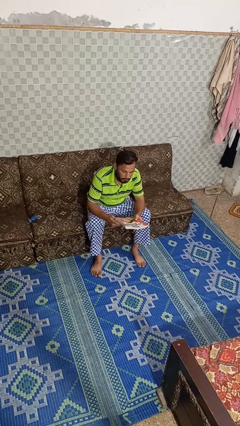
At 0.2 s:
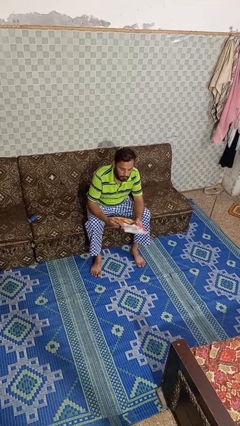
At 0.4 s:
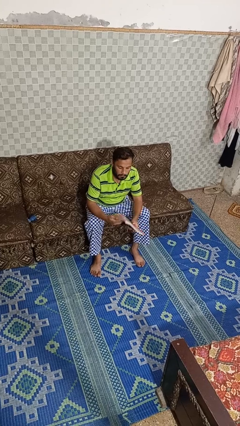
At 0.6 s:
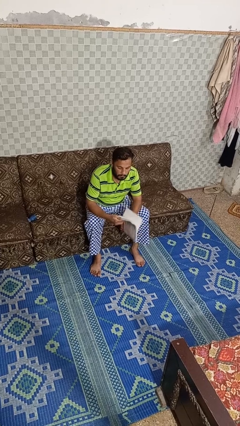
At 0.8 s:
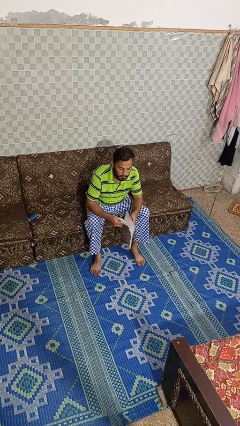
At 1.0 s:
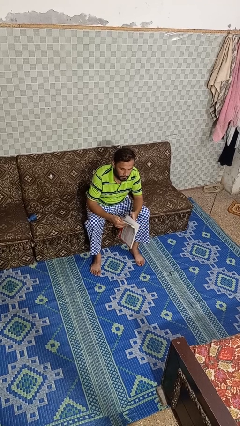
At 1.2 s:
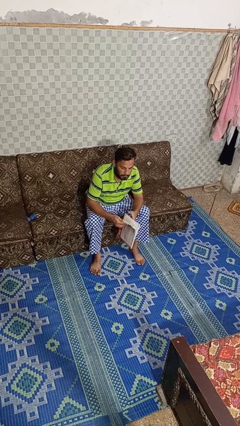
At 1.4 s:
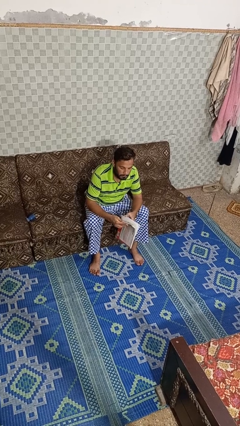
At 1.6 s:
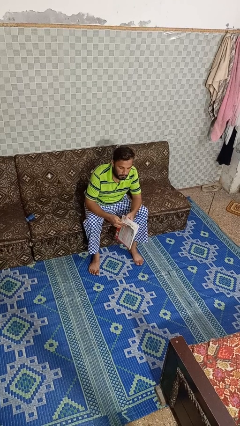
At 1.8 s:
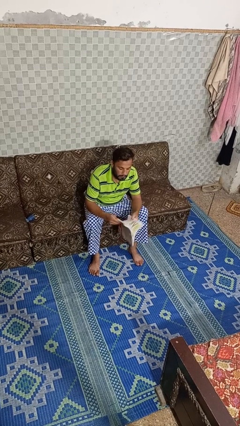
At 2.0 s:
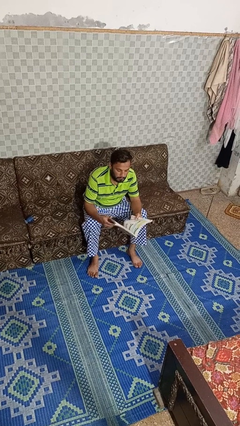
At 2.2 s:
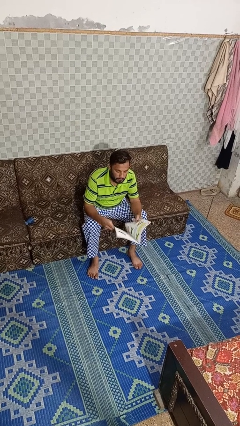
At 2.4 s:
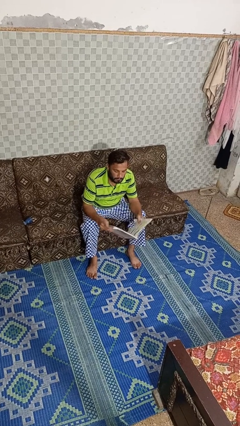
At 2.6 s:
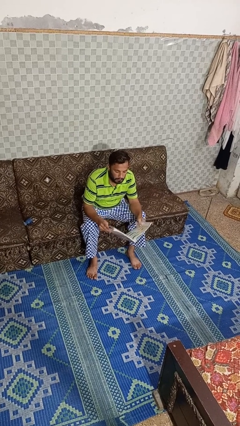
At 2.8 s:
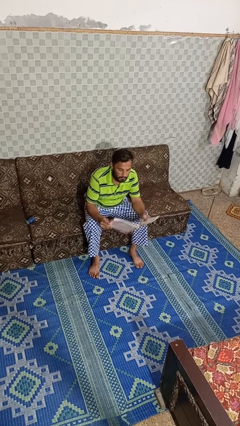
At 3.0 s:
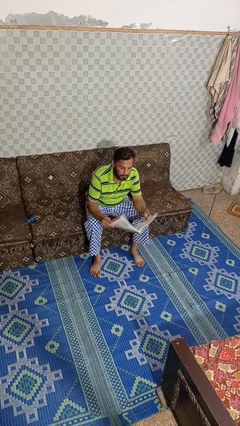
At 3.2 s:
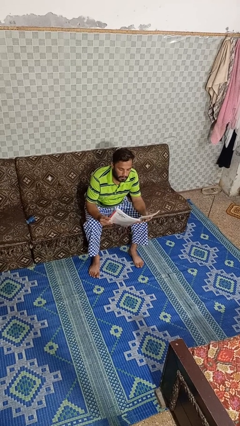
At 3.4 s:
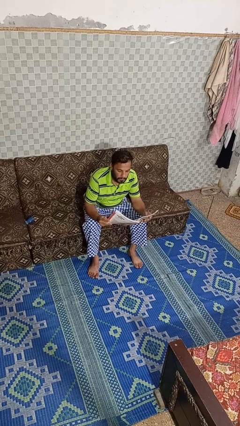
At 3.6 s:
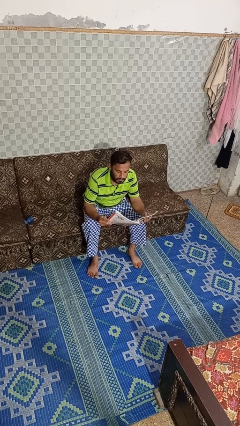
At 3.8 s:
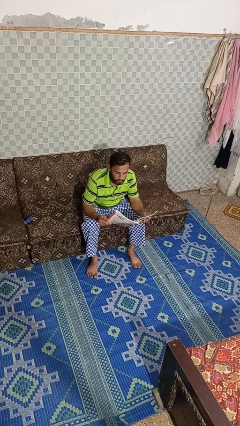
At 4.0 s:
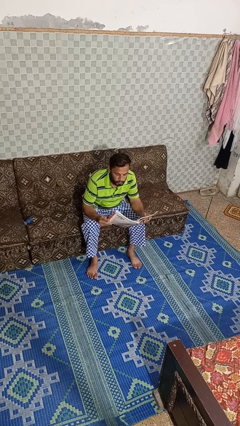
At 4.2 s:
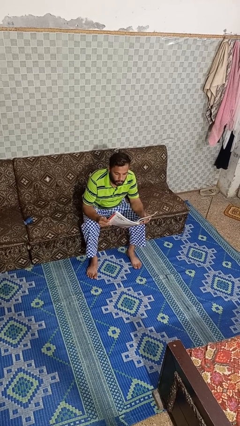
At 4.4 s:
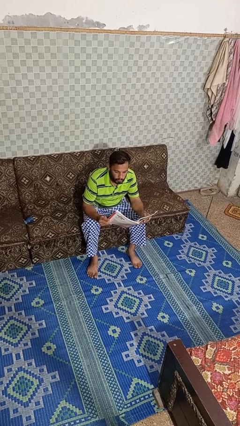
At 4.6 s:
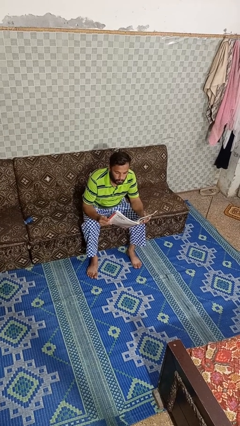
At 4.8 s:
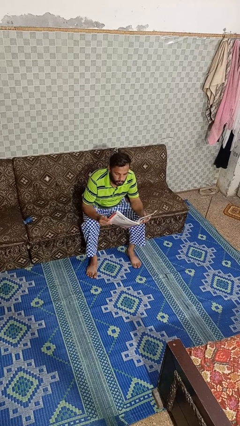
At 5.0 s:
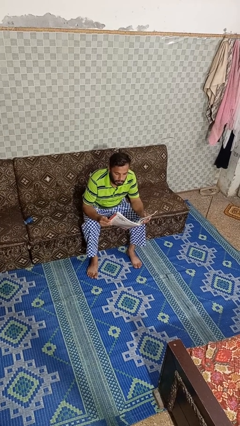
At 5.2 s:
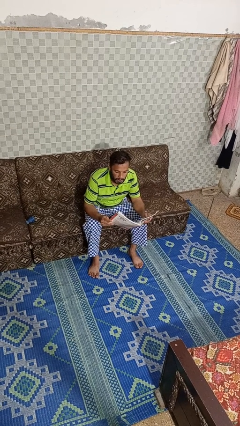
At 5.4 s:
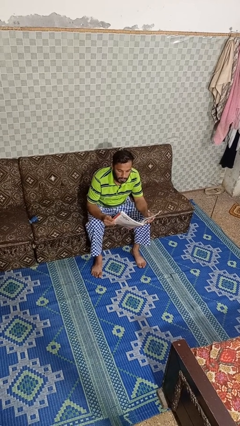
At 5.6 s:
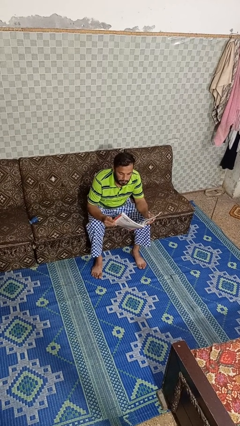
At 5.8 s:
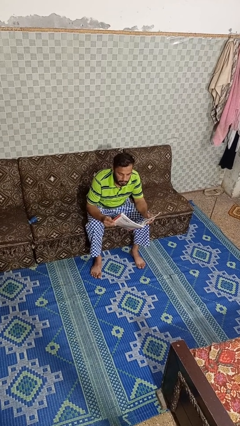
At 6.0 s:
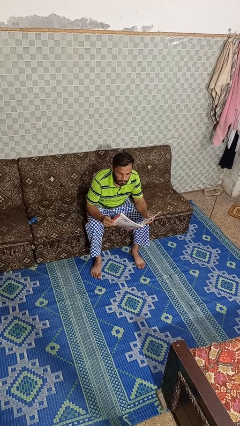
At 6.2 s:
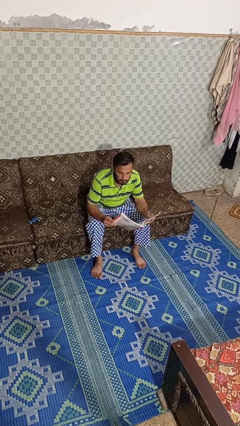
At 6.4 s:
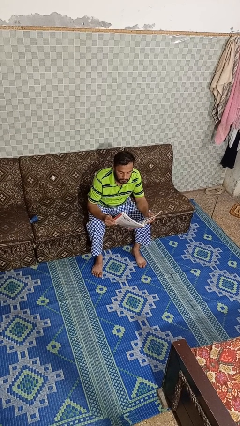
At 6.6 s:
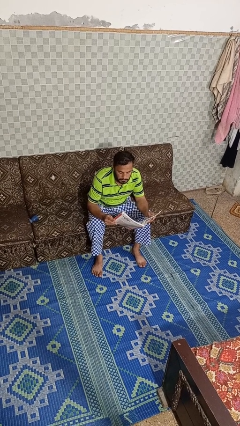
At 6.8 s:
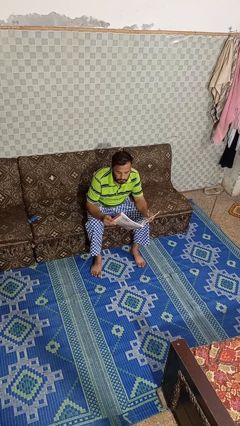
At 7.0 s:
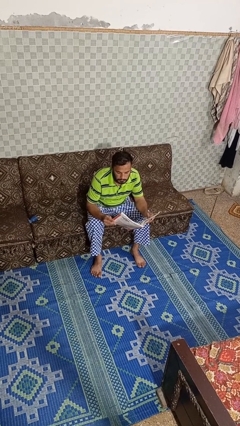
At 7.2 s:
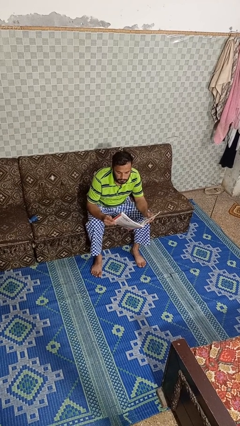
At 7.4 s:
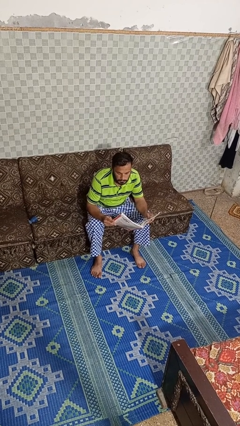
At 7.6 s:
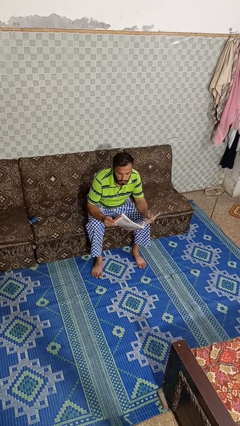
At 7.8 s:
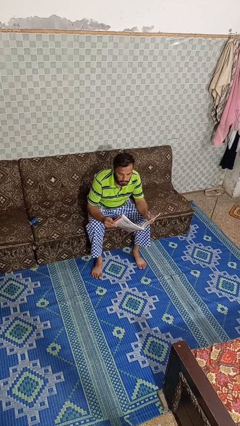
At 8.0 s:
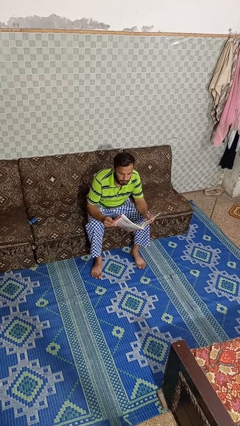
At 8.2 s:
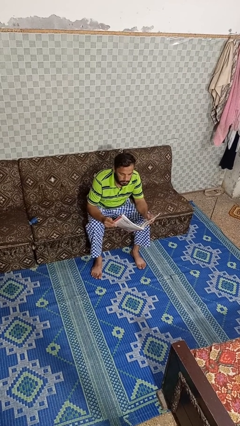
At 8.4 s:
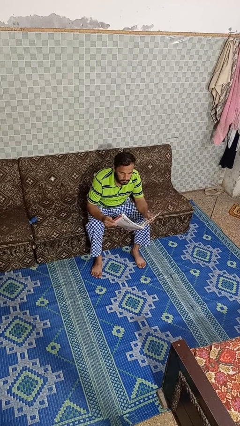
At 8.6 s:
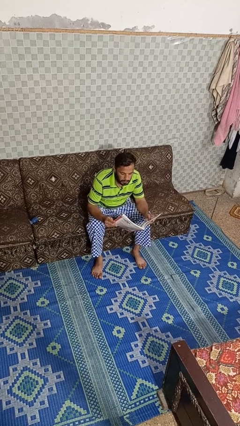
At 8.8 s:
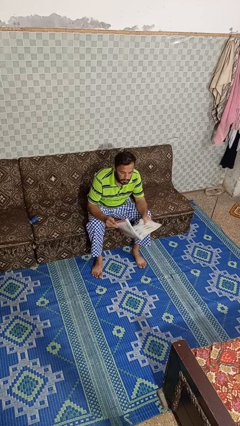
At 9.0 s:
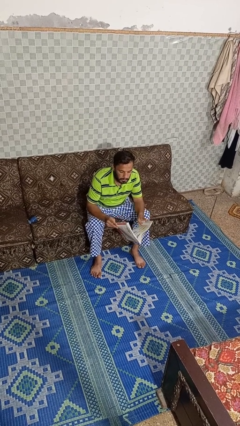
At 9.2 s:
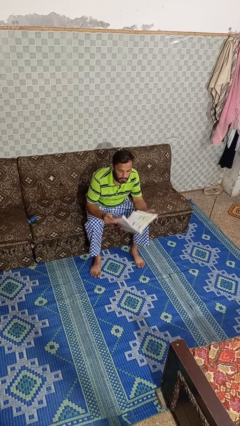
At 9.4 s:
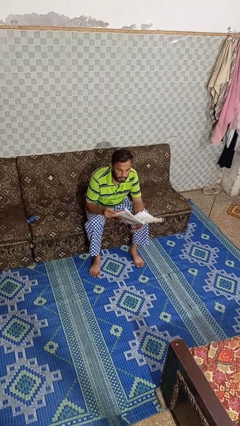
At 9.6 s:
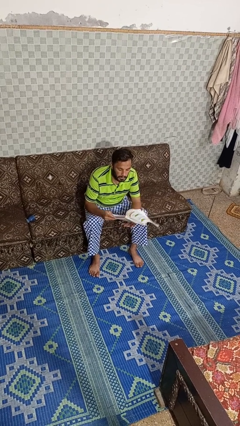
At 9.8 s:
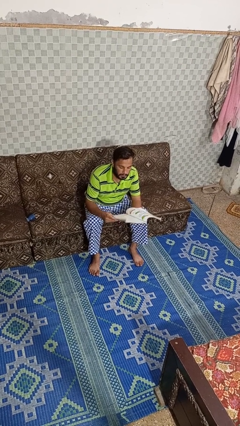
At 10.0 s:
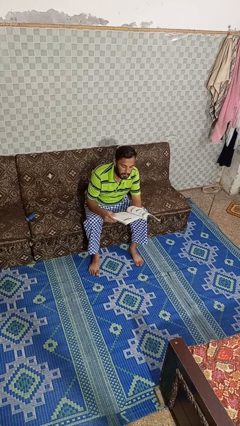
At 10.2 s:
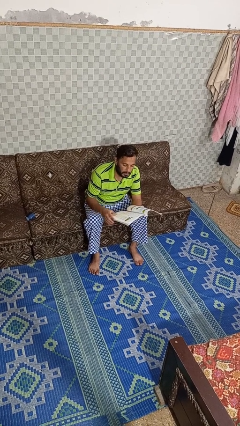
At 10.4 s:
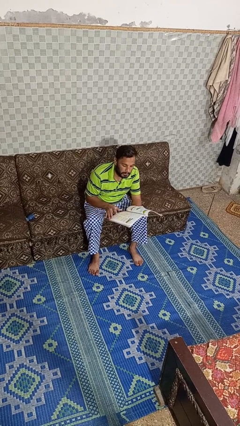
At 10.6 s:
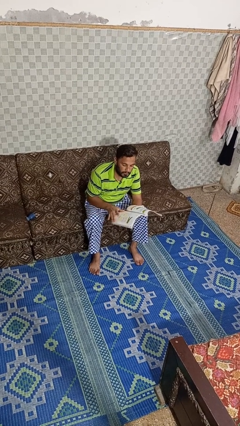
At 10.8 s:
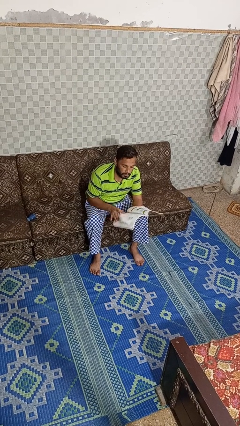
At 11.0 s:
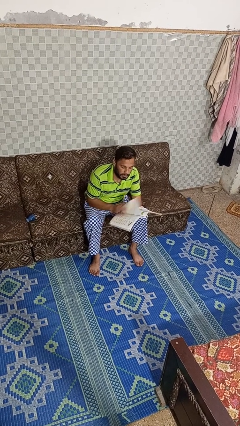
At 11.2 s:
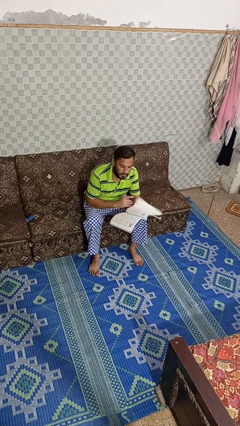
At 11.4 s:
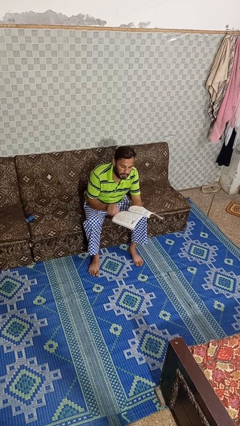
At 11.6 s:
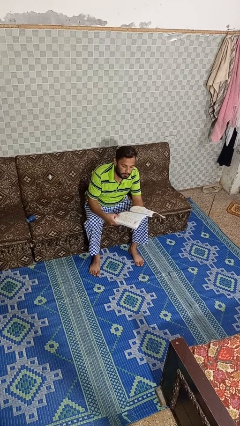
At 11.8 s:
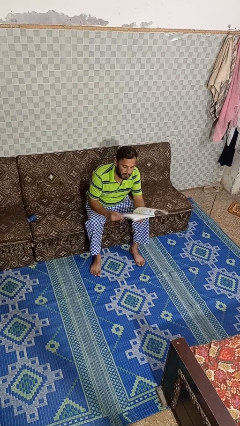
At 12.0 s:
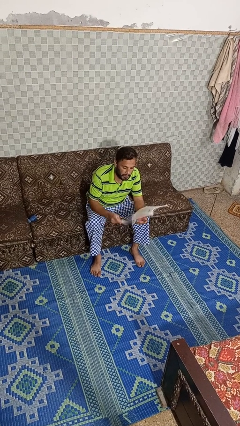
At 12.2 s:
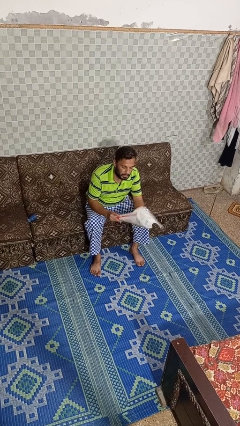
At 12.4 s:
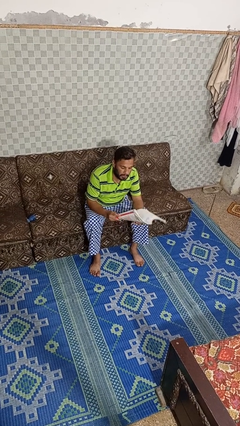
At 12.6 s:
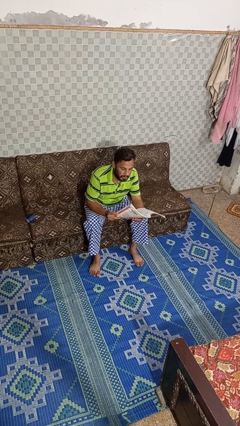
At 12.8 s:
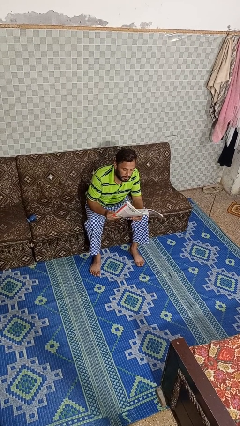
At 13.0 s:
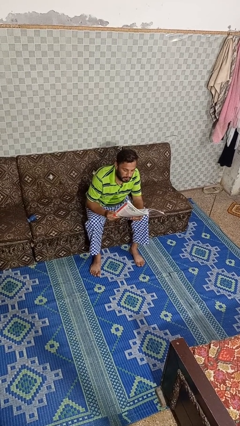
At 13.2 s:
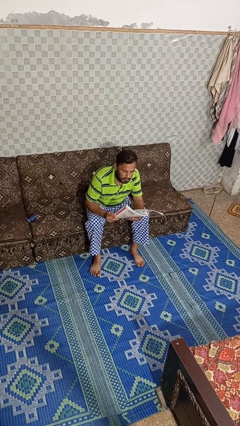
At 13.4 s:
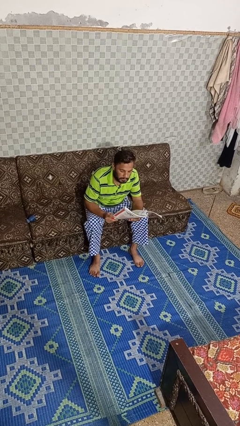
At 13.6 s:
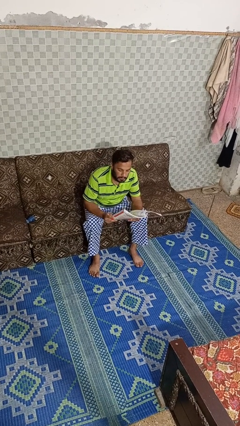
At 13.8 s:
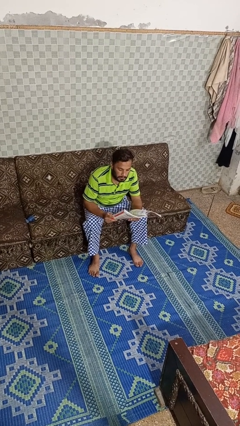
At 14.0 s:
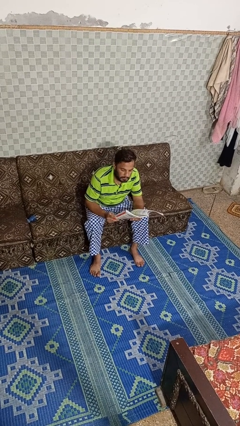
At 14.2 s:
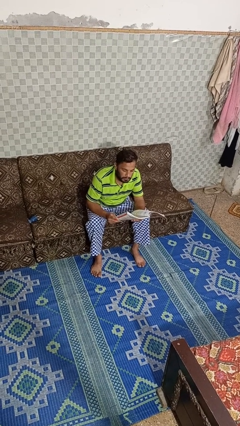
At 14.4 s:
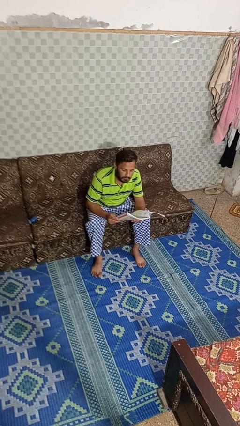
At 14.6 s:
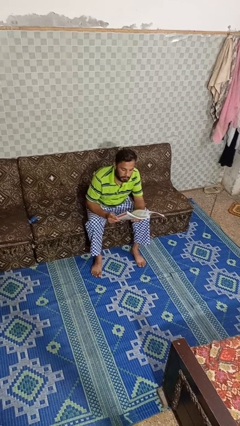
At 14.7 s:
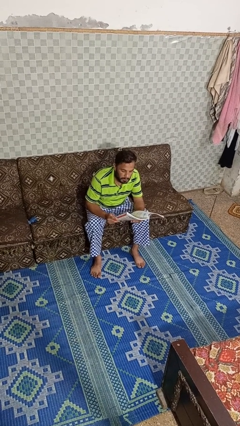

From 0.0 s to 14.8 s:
person reads book

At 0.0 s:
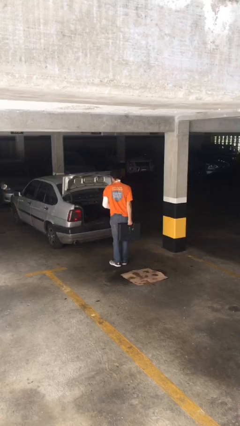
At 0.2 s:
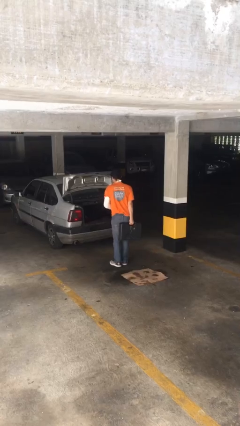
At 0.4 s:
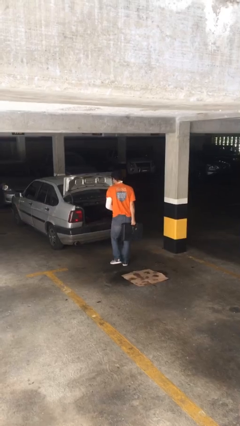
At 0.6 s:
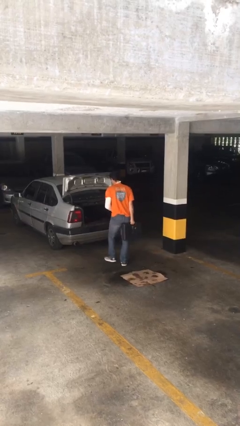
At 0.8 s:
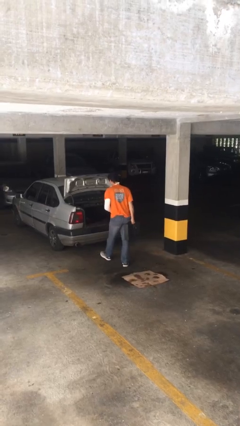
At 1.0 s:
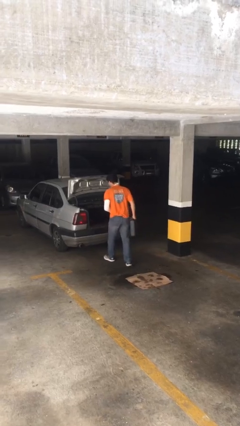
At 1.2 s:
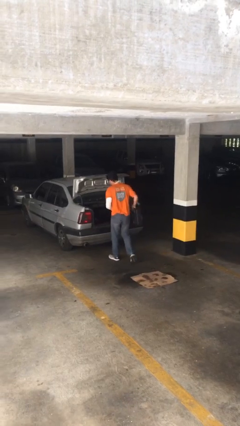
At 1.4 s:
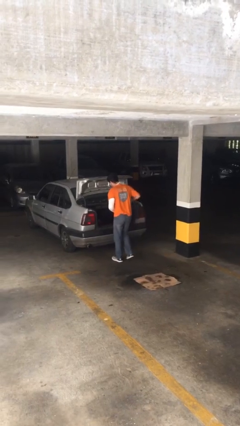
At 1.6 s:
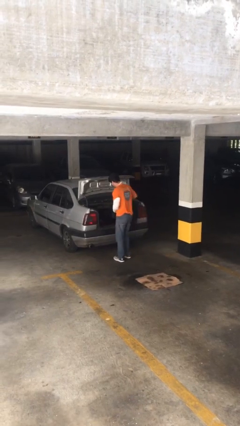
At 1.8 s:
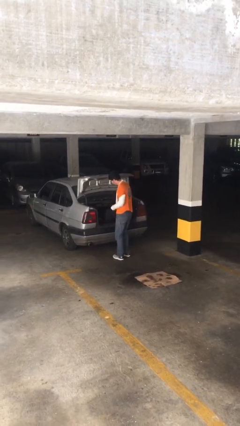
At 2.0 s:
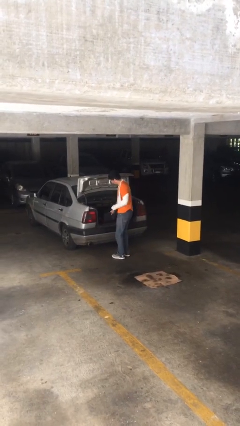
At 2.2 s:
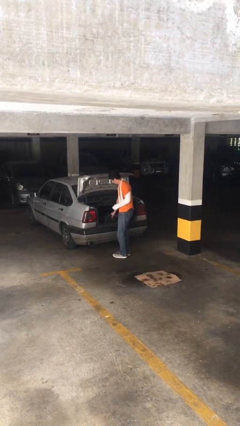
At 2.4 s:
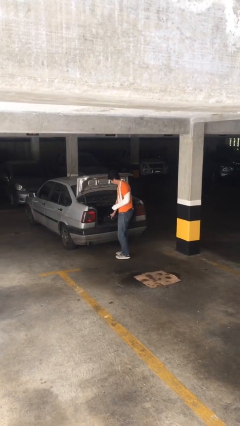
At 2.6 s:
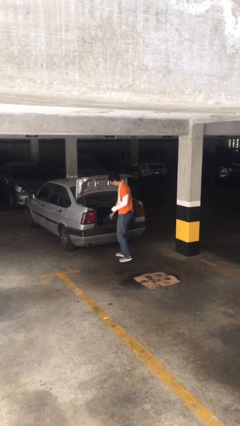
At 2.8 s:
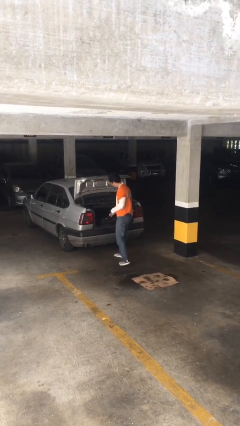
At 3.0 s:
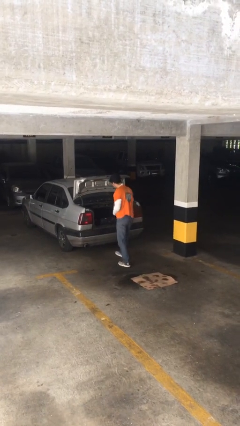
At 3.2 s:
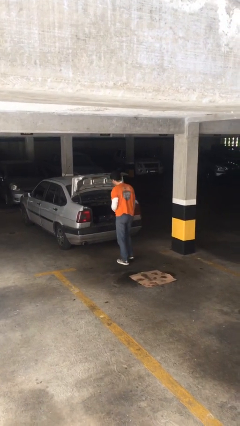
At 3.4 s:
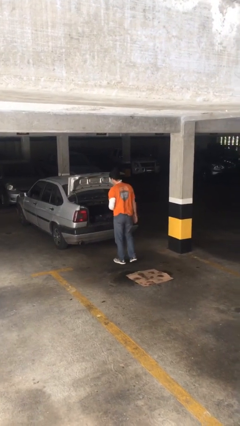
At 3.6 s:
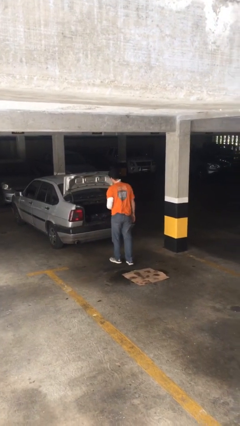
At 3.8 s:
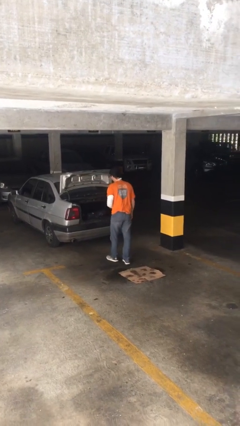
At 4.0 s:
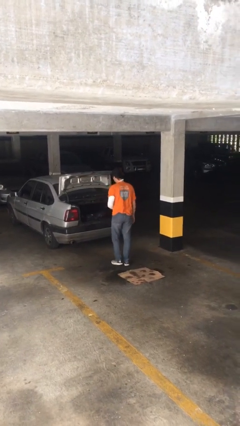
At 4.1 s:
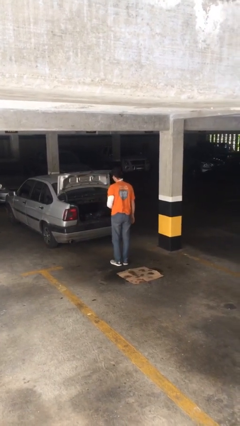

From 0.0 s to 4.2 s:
person loads car
